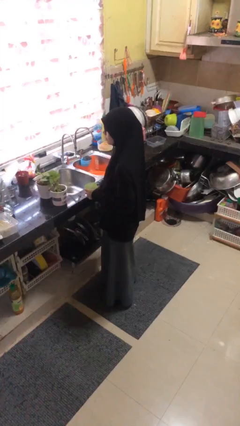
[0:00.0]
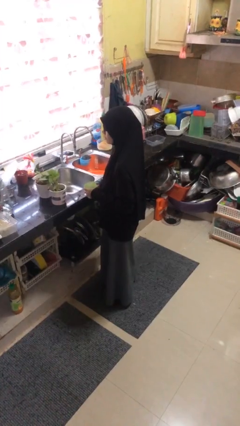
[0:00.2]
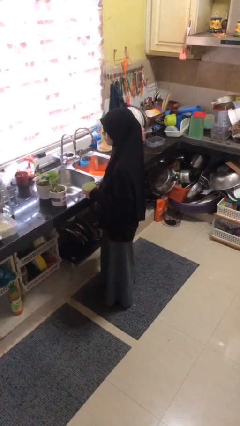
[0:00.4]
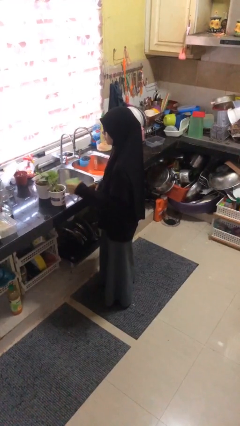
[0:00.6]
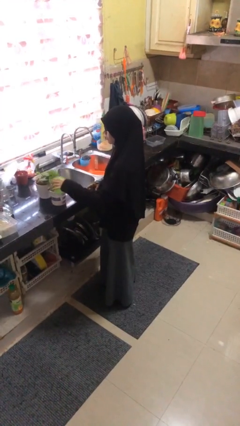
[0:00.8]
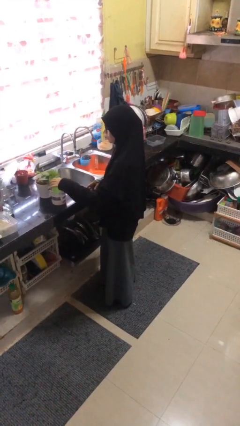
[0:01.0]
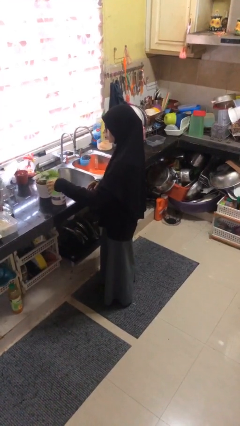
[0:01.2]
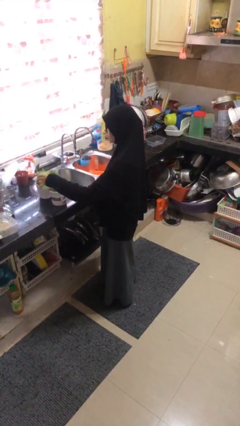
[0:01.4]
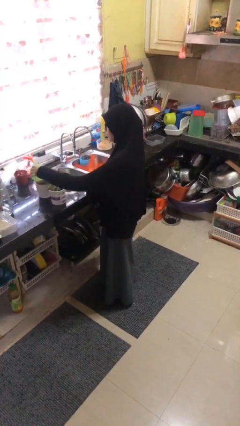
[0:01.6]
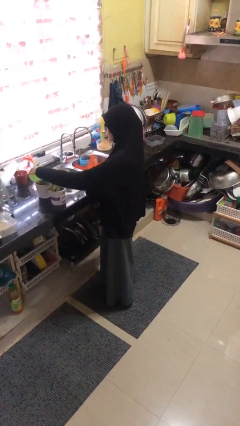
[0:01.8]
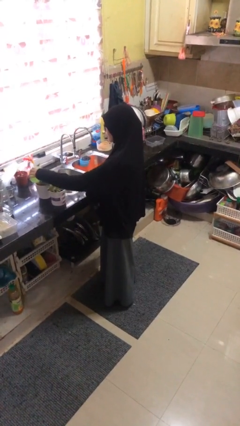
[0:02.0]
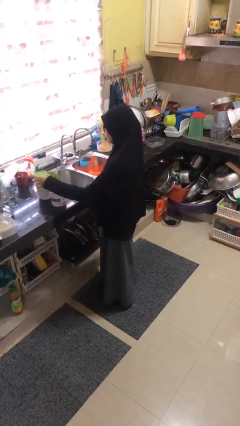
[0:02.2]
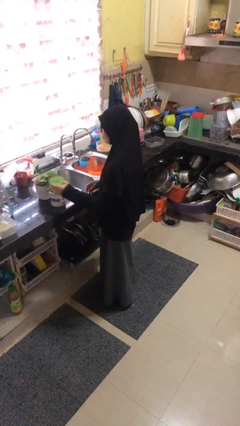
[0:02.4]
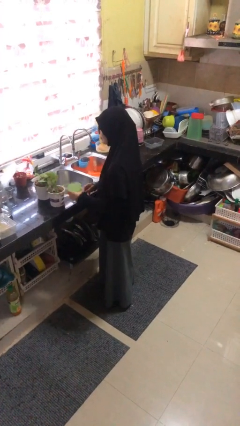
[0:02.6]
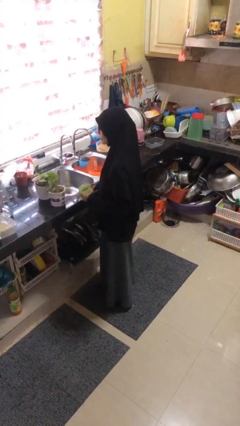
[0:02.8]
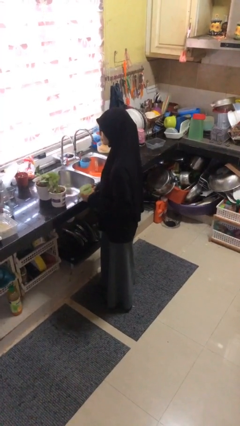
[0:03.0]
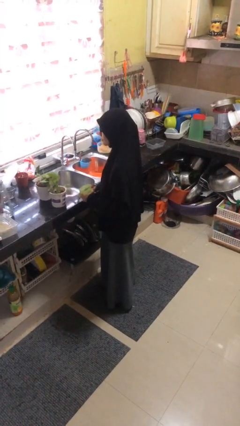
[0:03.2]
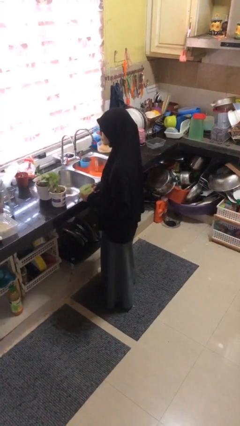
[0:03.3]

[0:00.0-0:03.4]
person waters houseplant

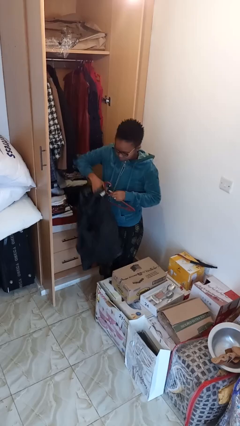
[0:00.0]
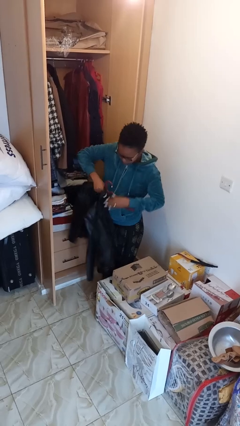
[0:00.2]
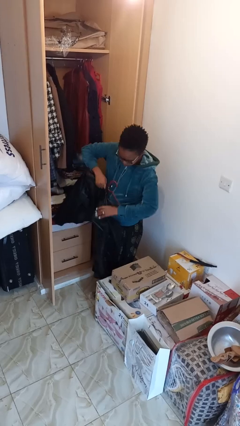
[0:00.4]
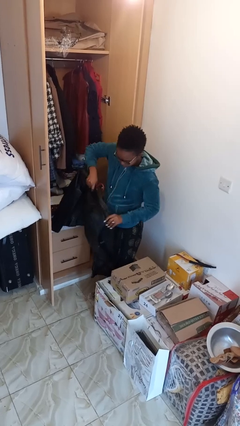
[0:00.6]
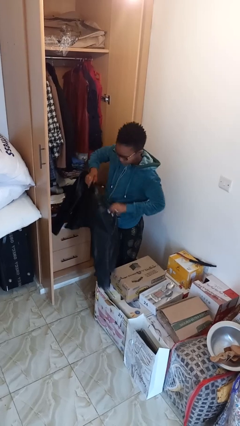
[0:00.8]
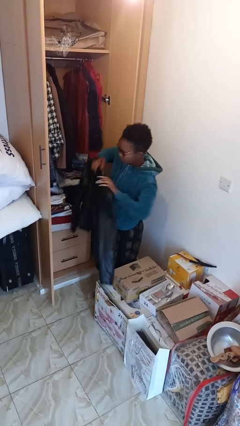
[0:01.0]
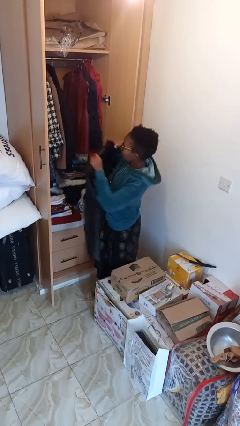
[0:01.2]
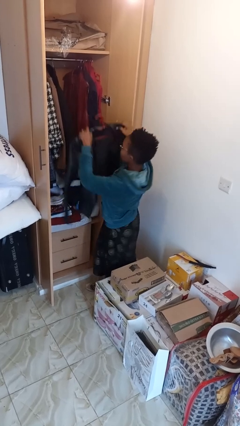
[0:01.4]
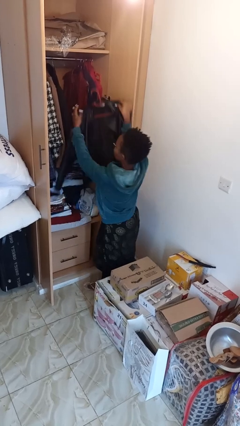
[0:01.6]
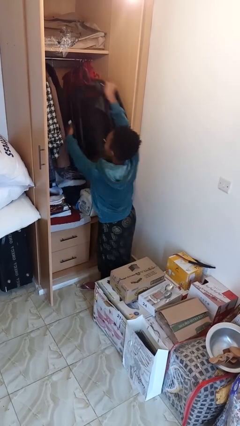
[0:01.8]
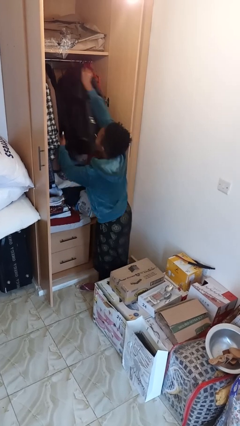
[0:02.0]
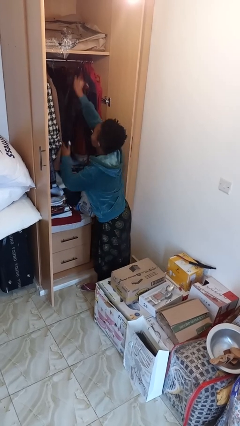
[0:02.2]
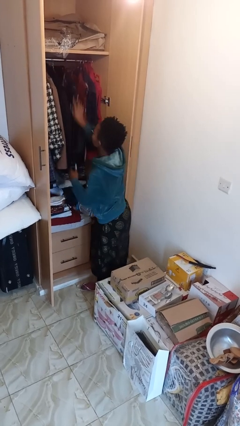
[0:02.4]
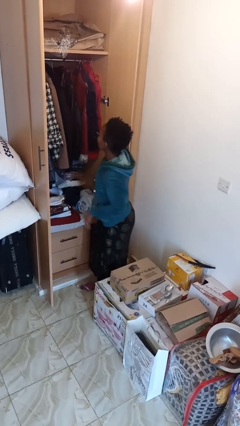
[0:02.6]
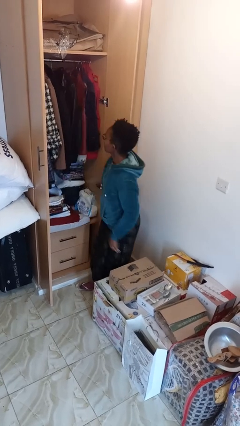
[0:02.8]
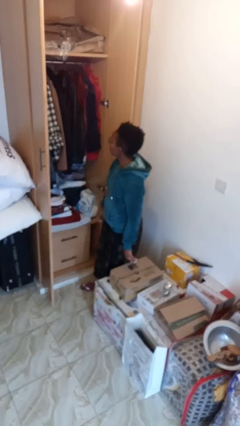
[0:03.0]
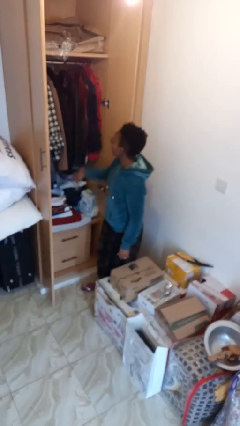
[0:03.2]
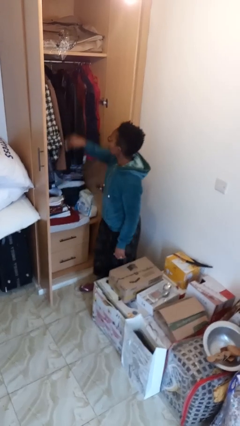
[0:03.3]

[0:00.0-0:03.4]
person puts clothes into closet

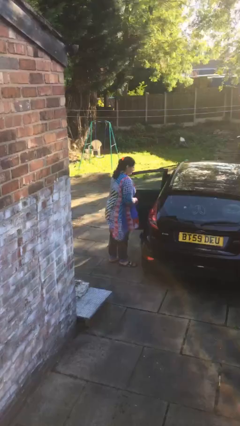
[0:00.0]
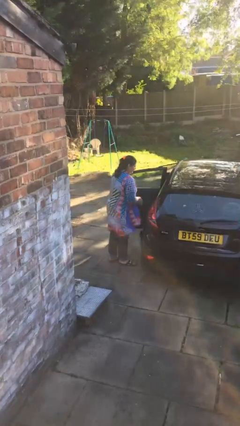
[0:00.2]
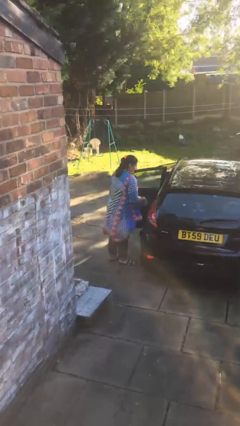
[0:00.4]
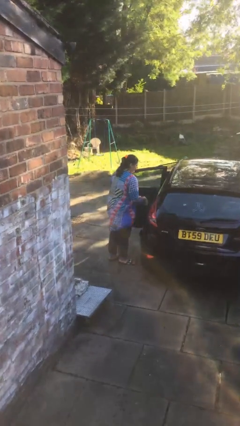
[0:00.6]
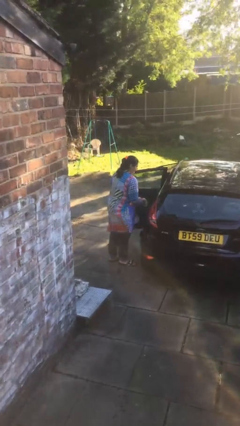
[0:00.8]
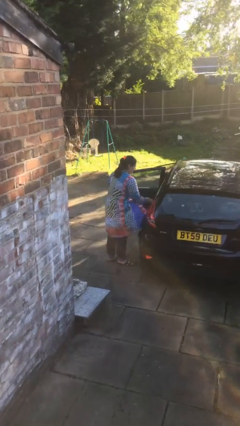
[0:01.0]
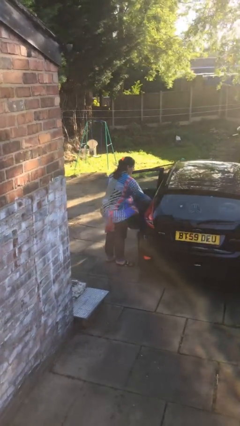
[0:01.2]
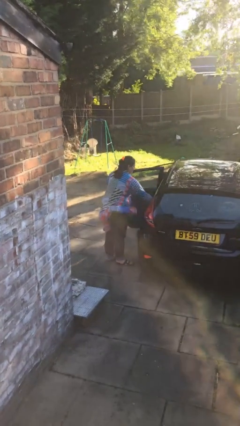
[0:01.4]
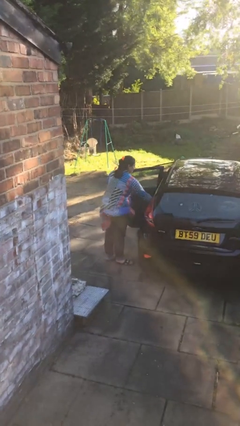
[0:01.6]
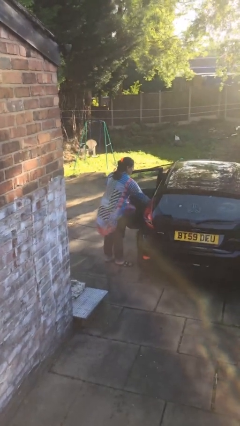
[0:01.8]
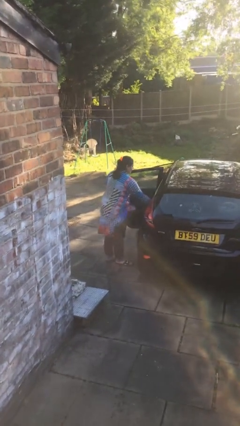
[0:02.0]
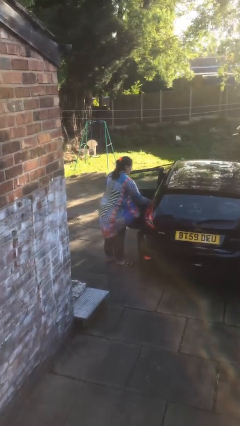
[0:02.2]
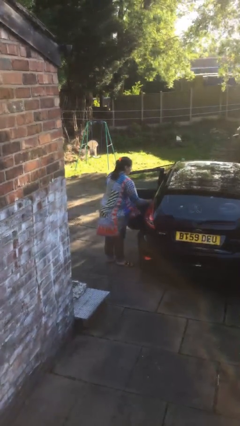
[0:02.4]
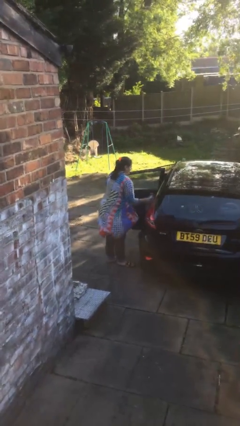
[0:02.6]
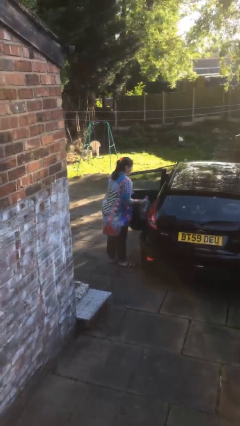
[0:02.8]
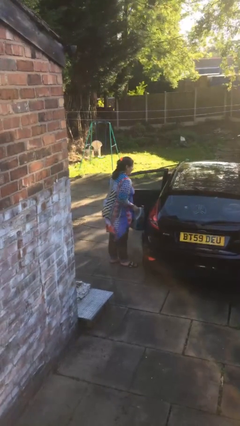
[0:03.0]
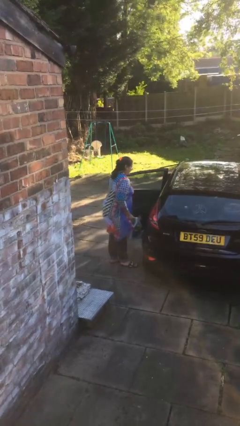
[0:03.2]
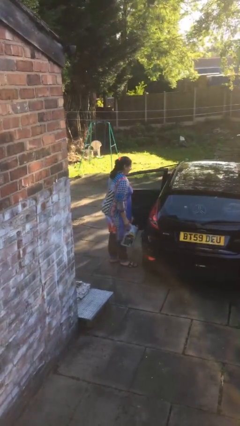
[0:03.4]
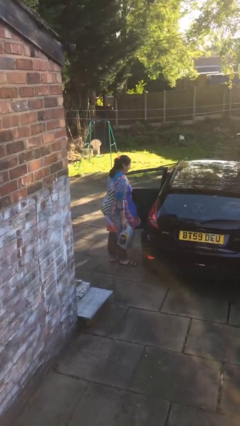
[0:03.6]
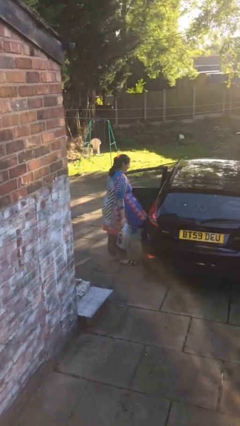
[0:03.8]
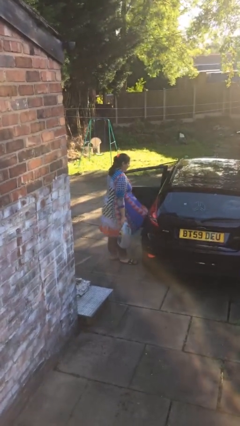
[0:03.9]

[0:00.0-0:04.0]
person unloads car

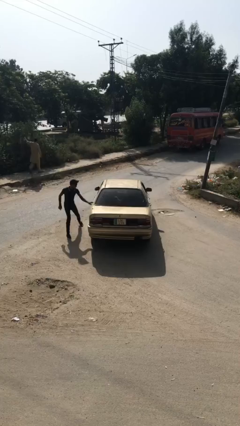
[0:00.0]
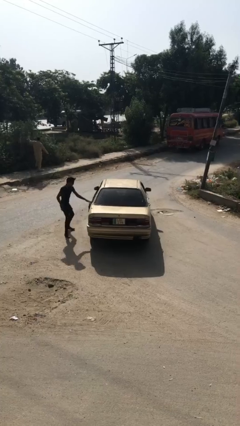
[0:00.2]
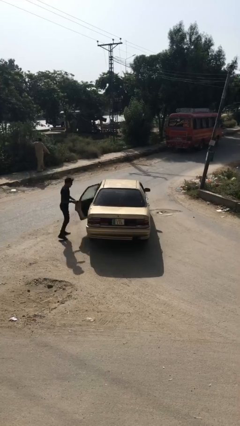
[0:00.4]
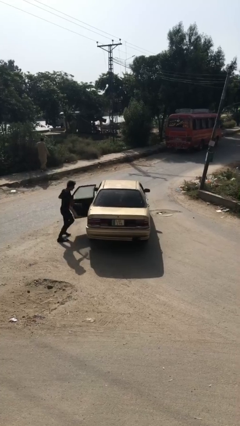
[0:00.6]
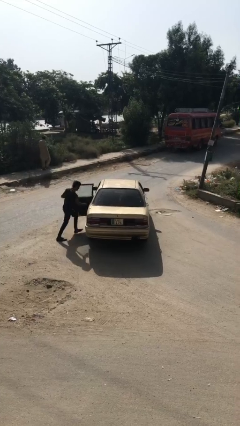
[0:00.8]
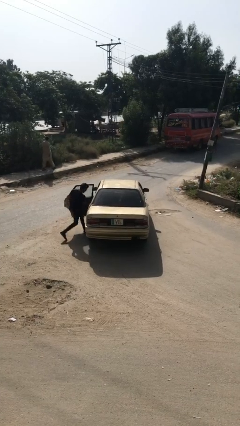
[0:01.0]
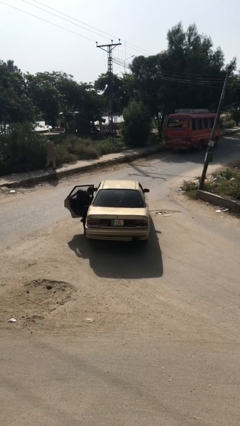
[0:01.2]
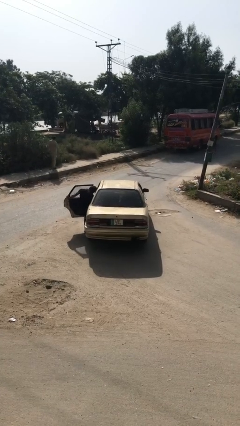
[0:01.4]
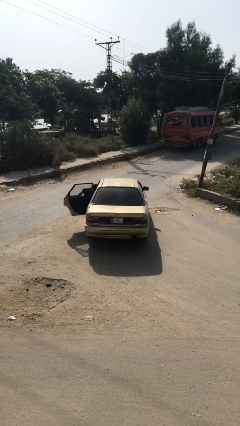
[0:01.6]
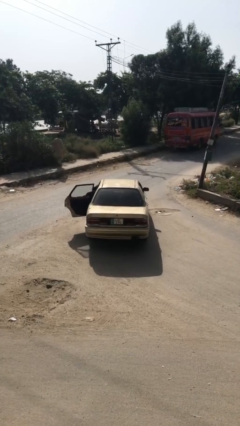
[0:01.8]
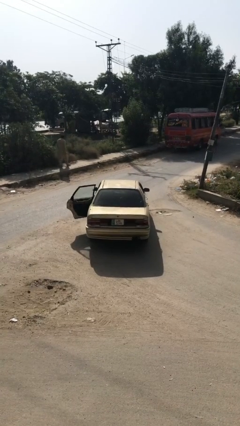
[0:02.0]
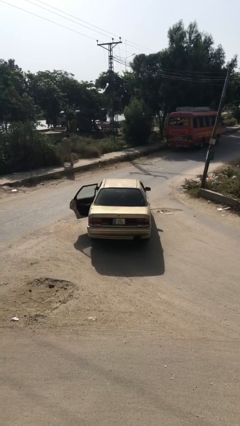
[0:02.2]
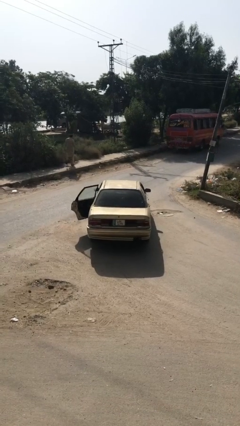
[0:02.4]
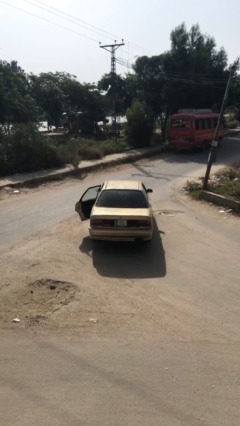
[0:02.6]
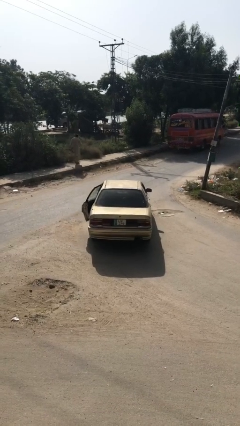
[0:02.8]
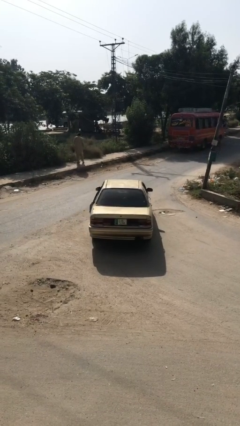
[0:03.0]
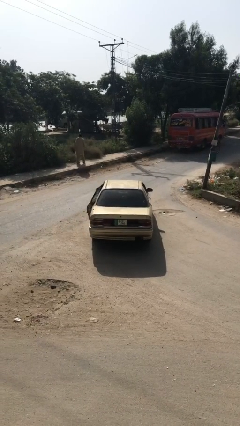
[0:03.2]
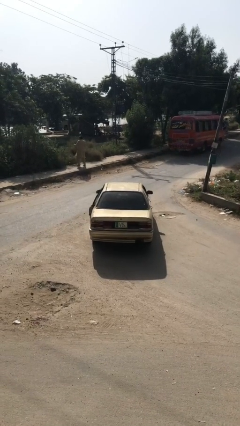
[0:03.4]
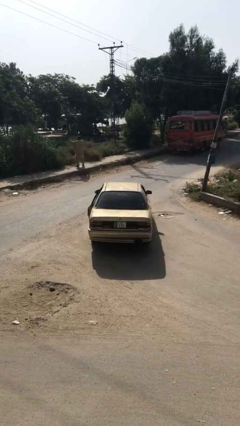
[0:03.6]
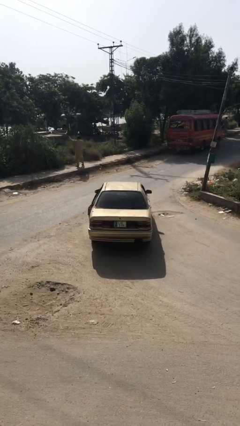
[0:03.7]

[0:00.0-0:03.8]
car picks up person

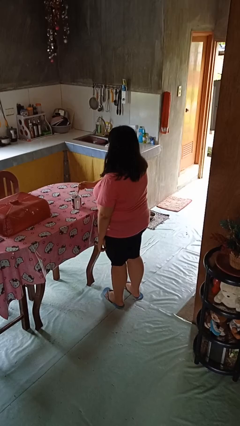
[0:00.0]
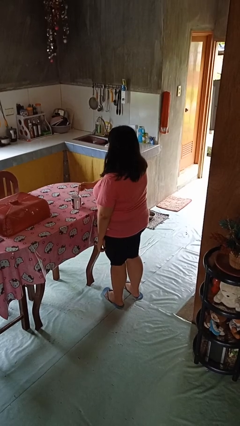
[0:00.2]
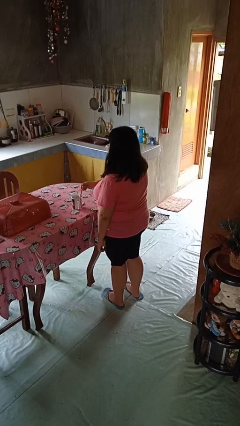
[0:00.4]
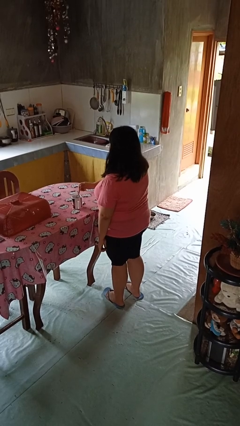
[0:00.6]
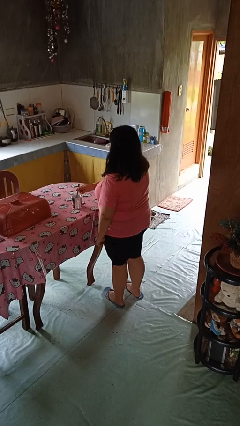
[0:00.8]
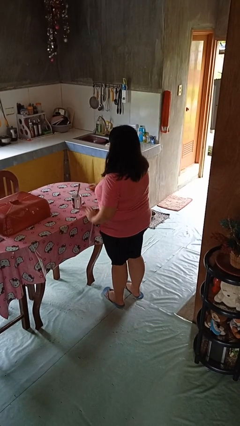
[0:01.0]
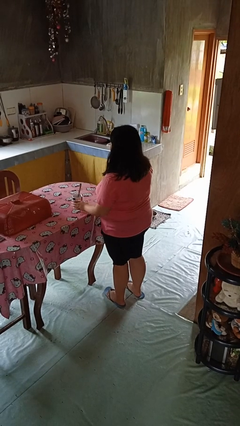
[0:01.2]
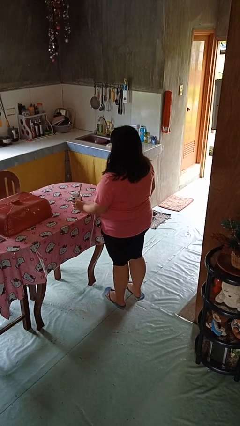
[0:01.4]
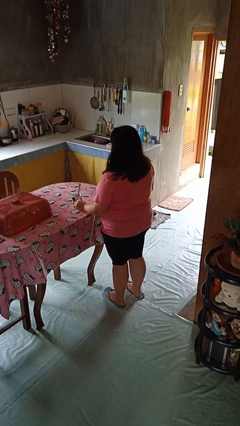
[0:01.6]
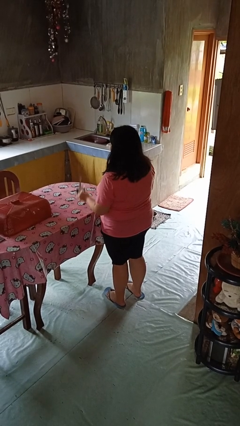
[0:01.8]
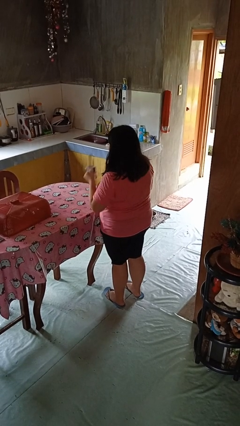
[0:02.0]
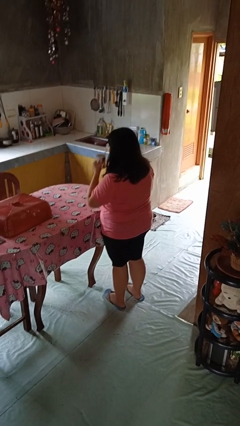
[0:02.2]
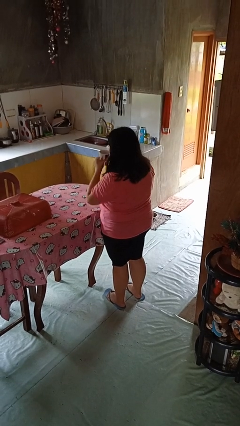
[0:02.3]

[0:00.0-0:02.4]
person stirs mug

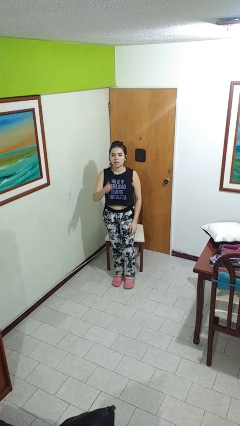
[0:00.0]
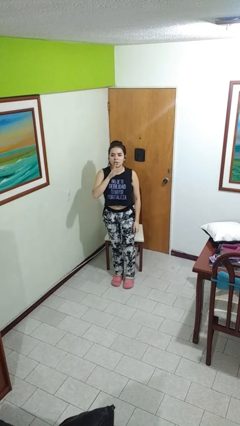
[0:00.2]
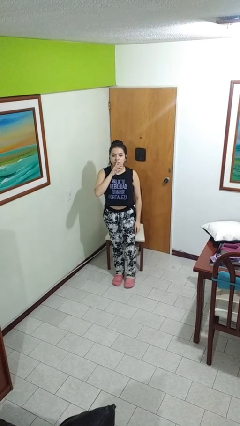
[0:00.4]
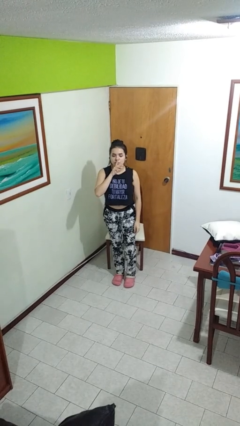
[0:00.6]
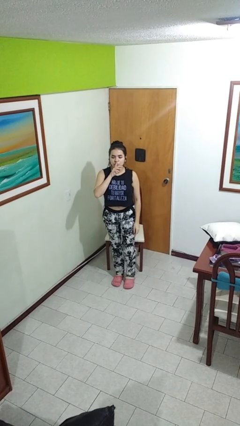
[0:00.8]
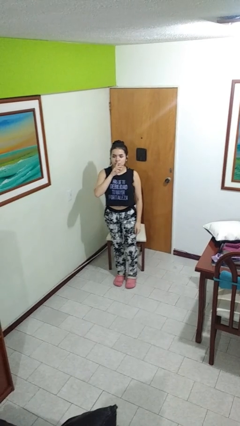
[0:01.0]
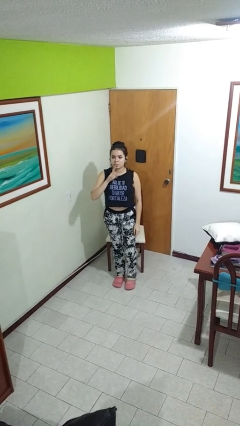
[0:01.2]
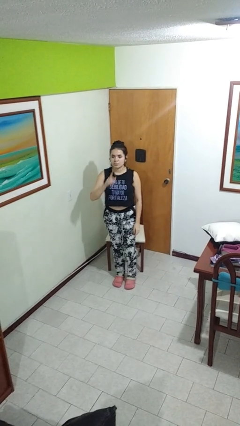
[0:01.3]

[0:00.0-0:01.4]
person gestures be quiet
